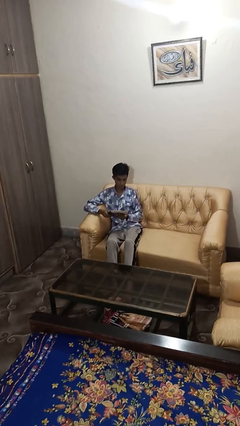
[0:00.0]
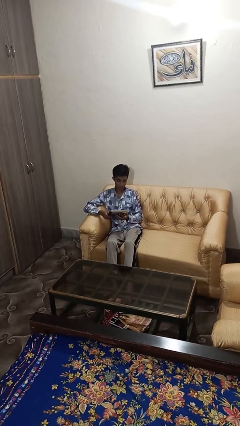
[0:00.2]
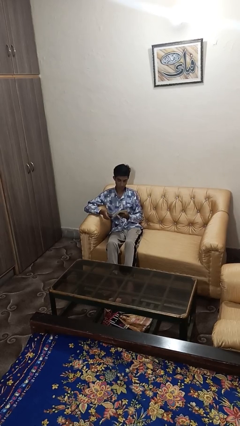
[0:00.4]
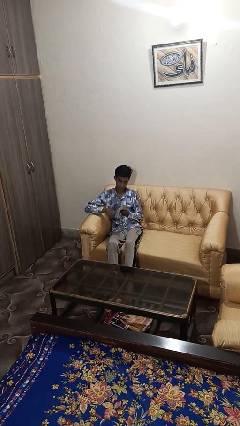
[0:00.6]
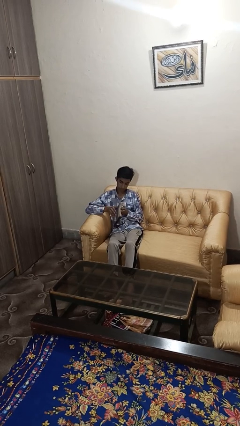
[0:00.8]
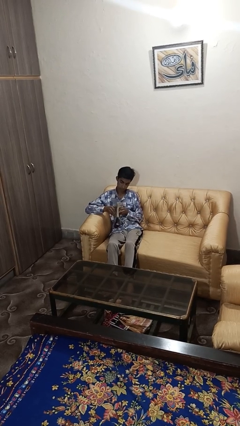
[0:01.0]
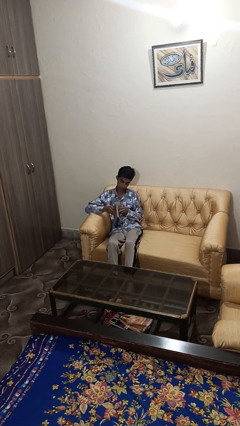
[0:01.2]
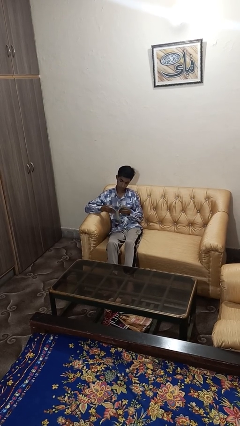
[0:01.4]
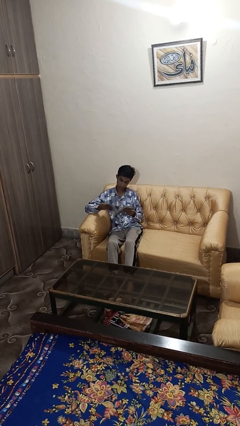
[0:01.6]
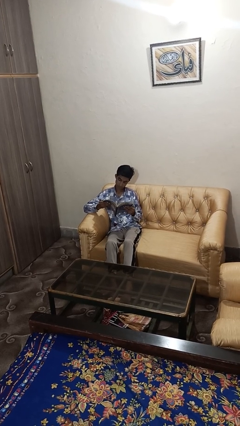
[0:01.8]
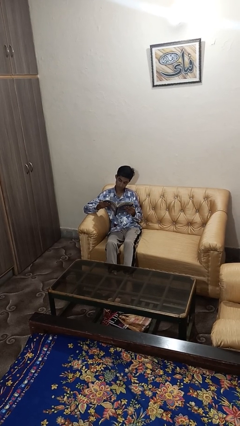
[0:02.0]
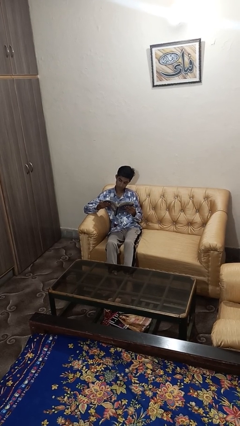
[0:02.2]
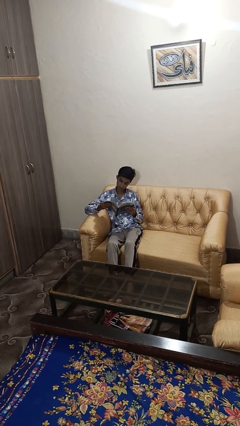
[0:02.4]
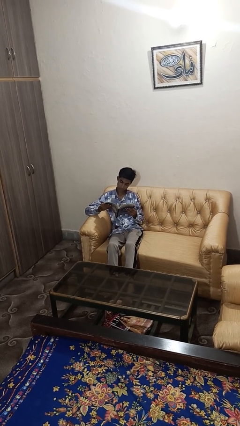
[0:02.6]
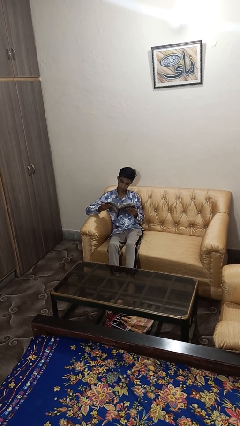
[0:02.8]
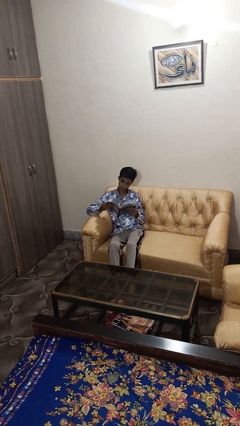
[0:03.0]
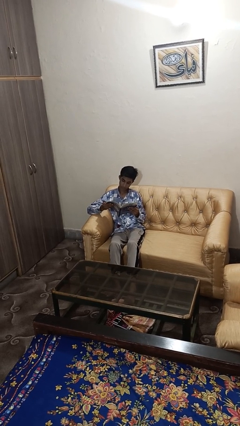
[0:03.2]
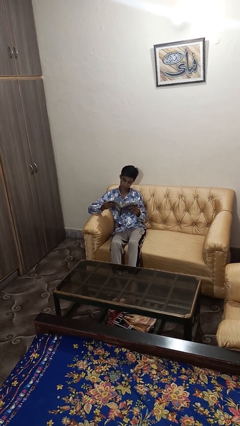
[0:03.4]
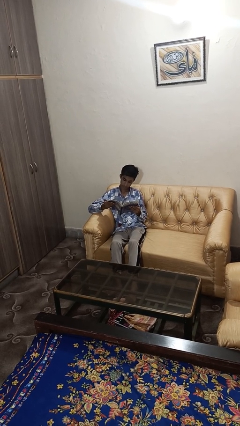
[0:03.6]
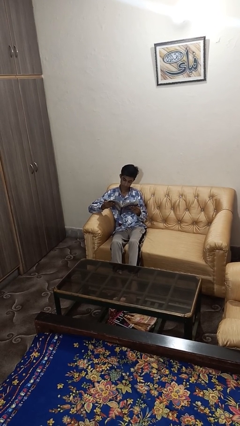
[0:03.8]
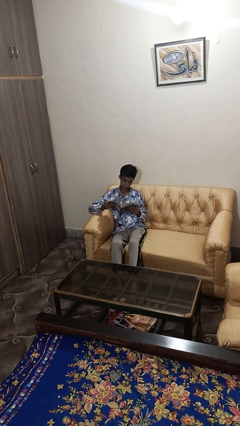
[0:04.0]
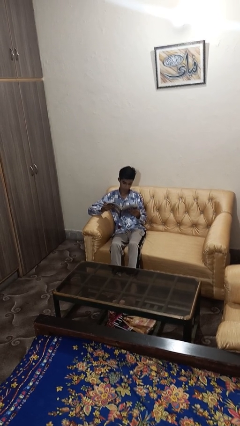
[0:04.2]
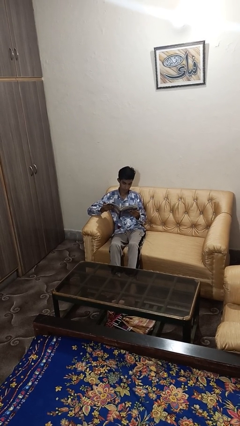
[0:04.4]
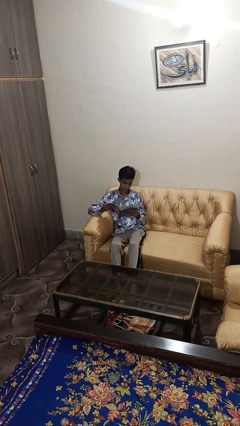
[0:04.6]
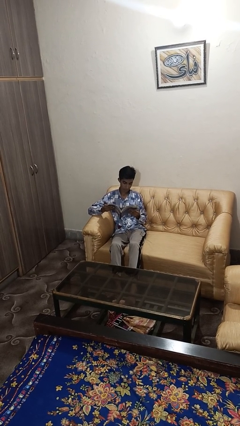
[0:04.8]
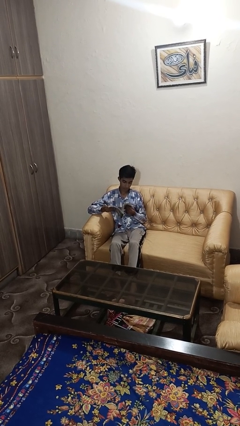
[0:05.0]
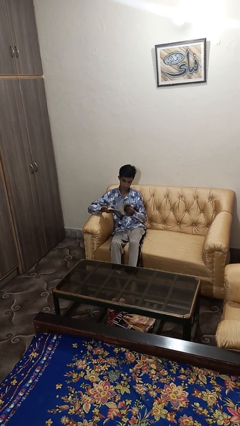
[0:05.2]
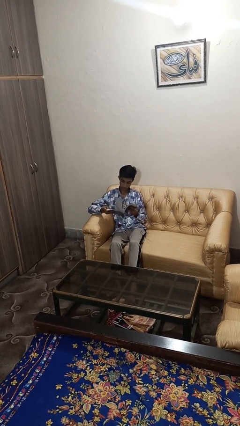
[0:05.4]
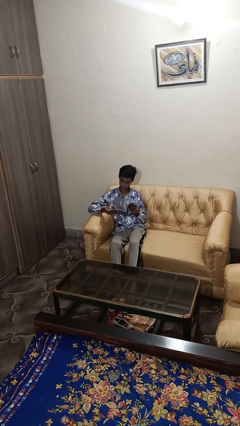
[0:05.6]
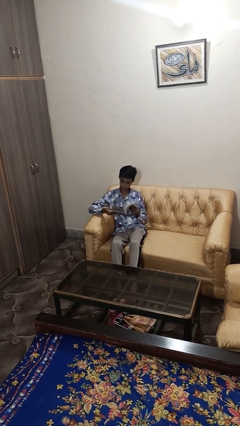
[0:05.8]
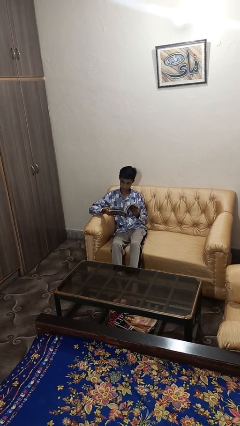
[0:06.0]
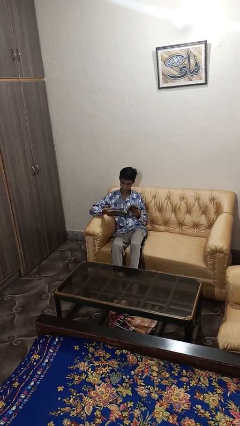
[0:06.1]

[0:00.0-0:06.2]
person reads book

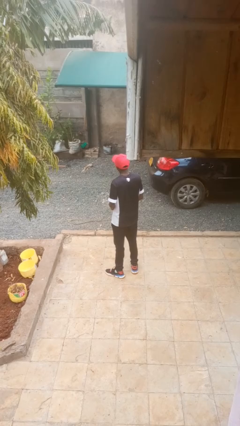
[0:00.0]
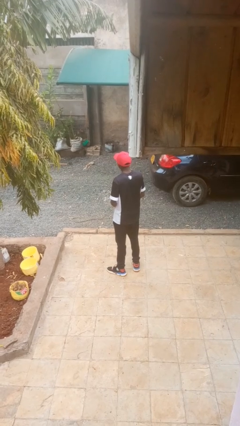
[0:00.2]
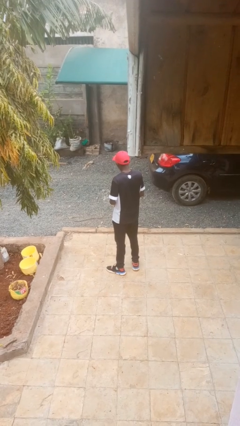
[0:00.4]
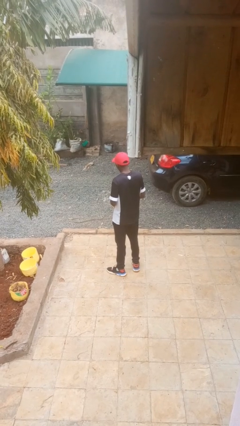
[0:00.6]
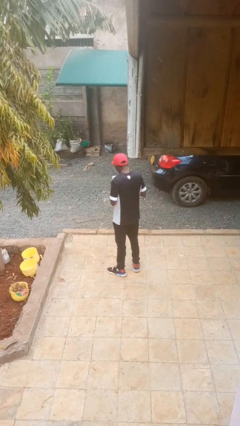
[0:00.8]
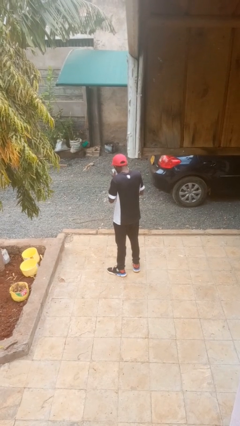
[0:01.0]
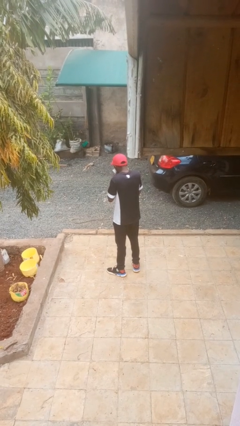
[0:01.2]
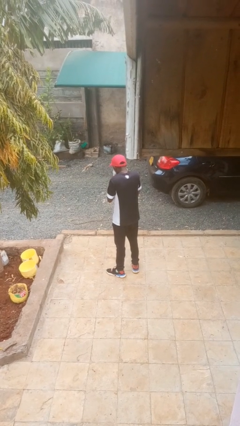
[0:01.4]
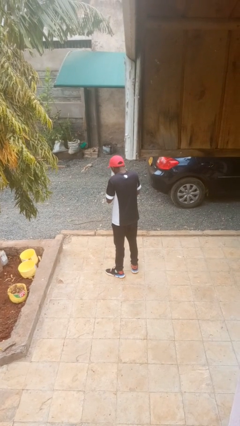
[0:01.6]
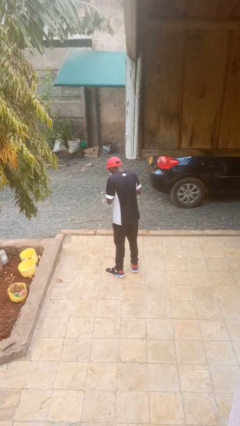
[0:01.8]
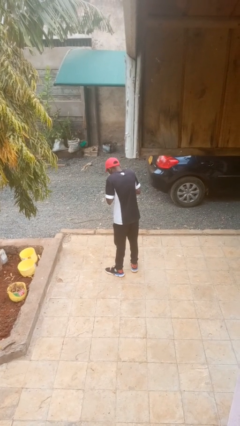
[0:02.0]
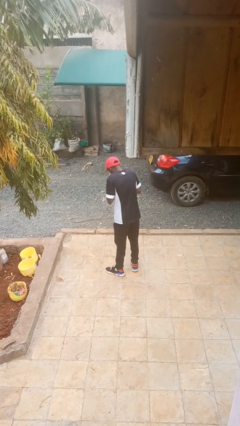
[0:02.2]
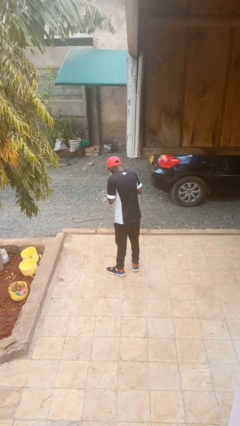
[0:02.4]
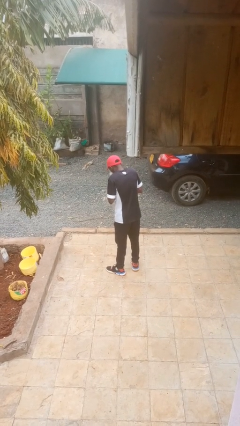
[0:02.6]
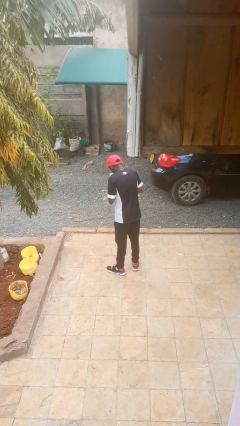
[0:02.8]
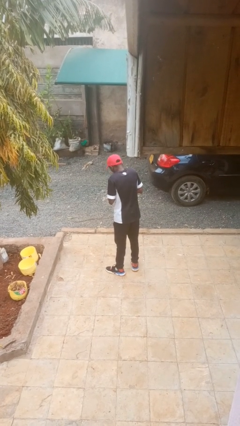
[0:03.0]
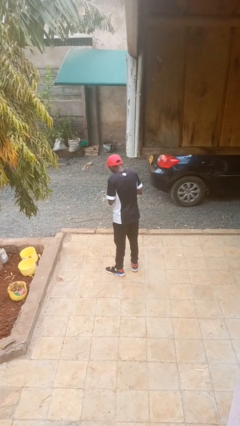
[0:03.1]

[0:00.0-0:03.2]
person blows nose

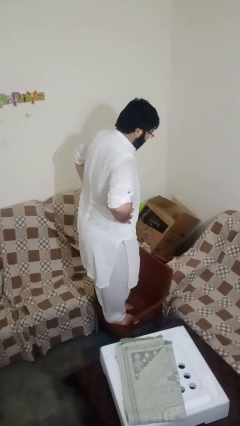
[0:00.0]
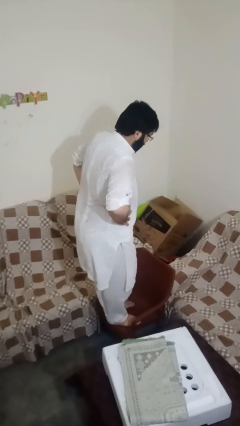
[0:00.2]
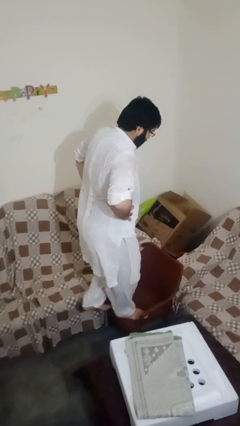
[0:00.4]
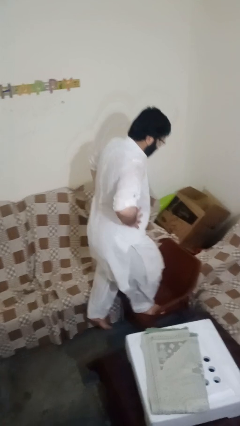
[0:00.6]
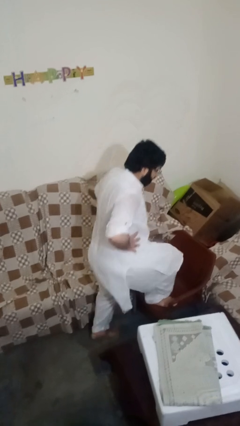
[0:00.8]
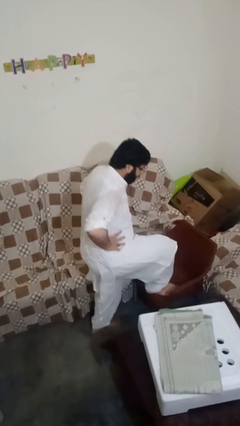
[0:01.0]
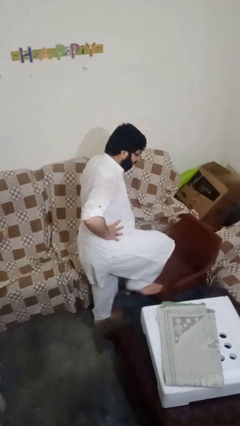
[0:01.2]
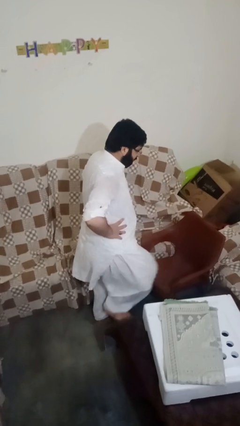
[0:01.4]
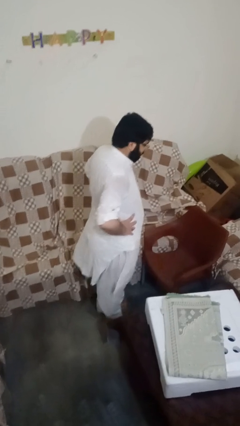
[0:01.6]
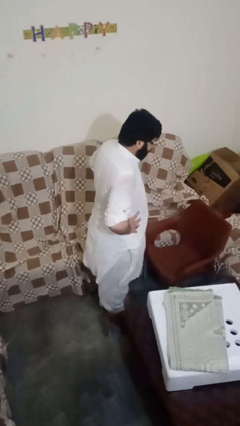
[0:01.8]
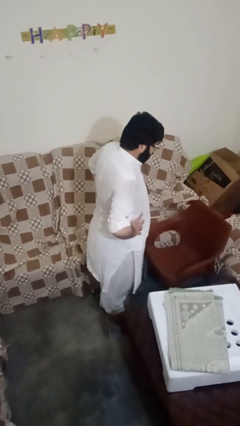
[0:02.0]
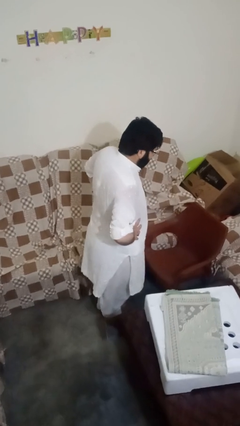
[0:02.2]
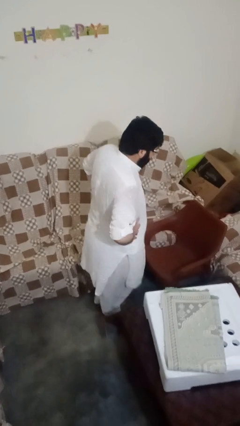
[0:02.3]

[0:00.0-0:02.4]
person climbs off chair

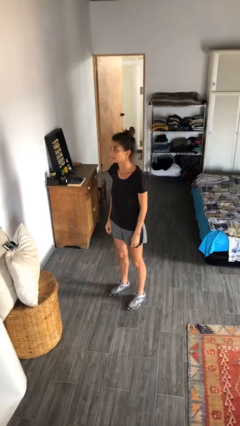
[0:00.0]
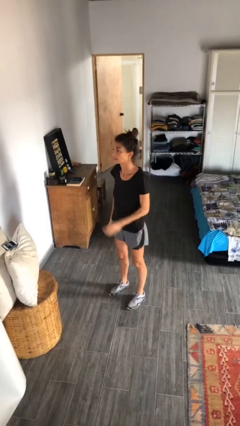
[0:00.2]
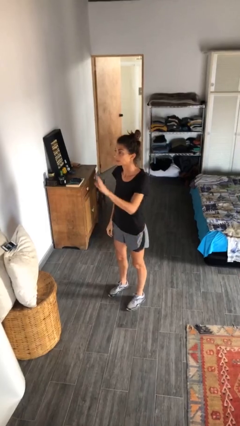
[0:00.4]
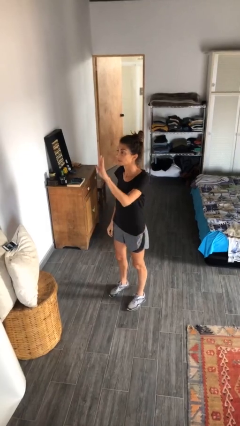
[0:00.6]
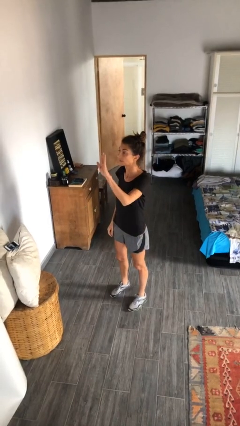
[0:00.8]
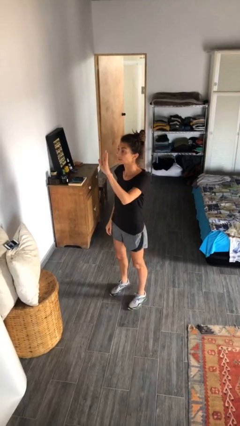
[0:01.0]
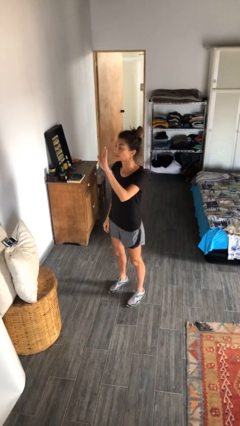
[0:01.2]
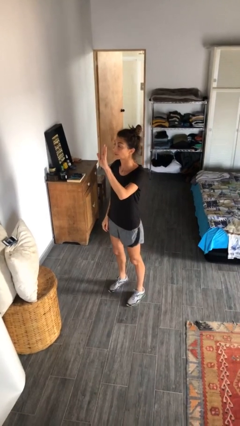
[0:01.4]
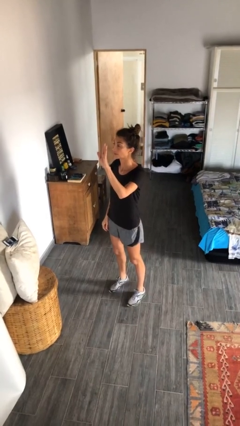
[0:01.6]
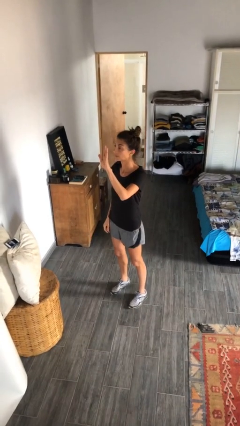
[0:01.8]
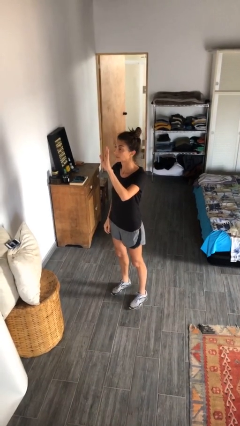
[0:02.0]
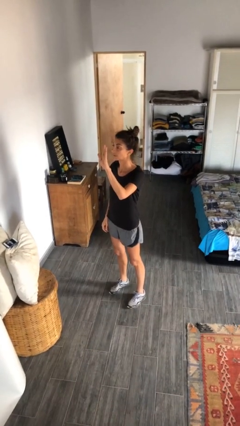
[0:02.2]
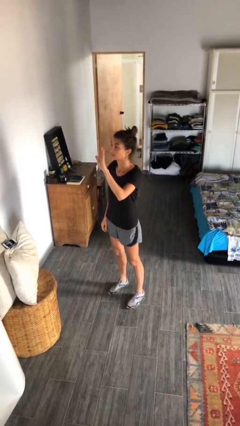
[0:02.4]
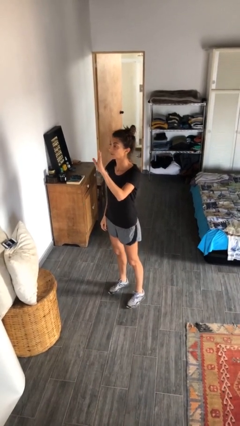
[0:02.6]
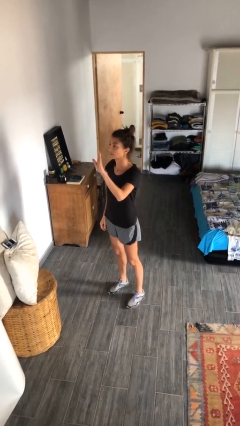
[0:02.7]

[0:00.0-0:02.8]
person gestures raise hand

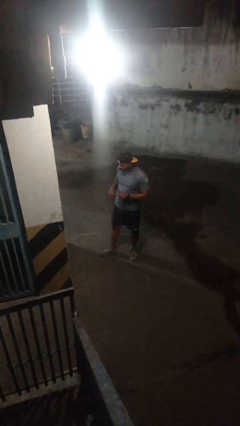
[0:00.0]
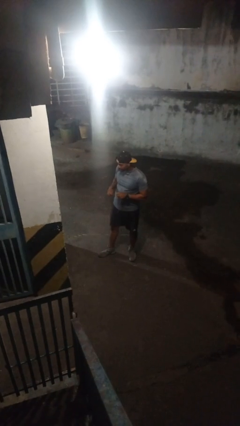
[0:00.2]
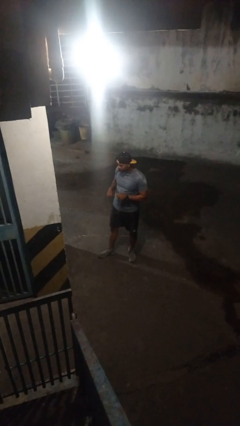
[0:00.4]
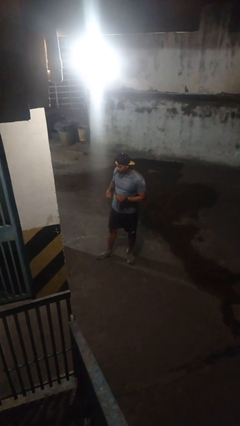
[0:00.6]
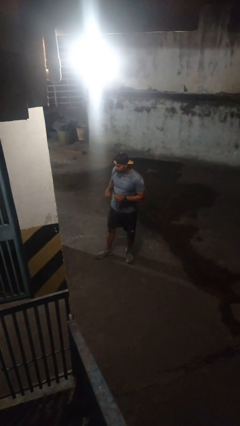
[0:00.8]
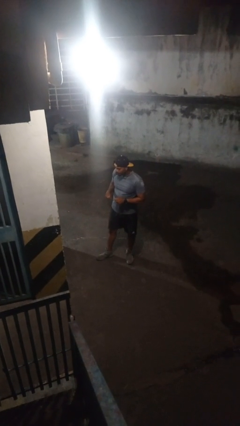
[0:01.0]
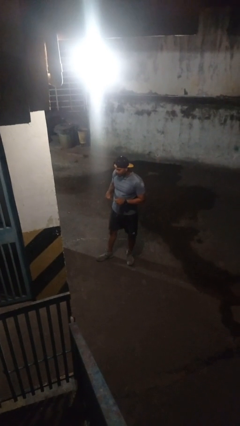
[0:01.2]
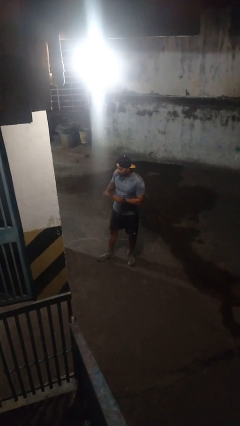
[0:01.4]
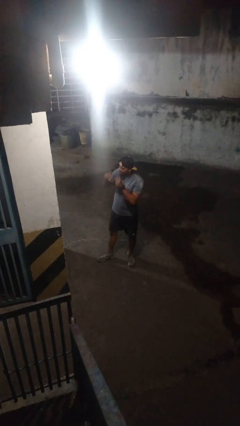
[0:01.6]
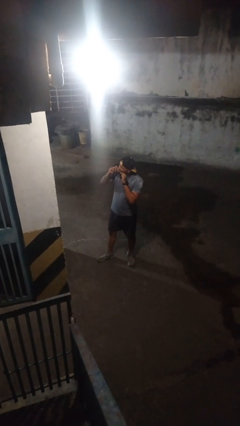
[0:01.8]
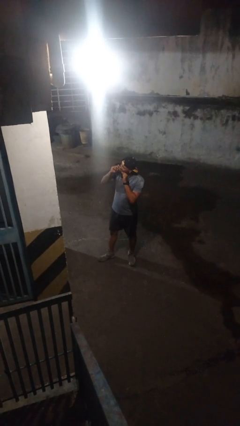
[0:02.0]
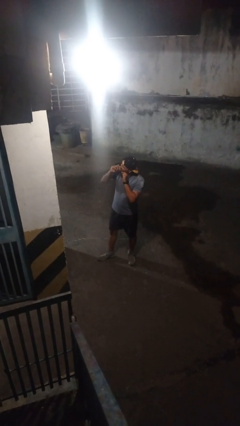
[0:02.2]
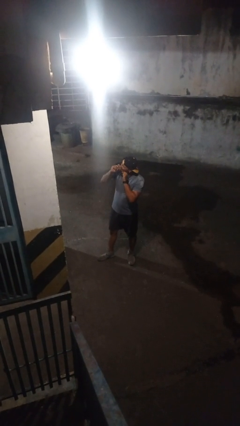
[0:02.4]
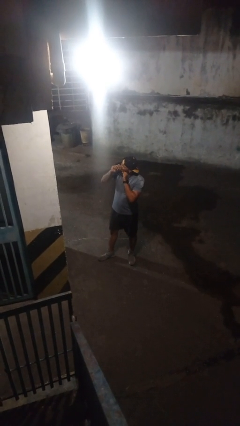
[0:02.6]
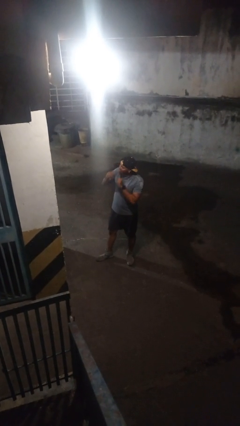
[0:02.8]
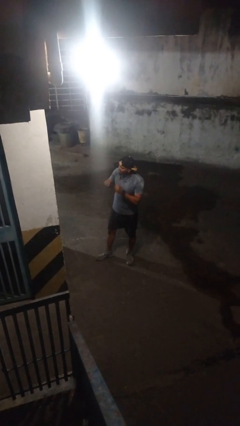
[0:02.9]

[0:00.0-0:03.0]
person flosses
